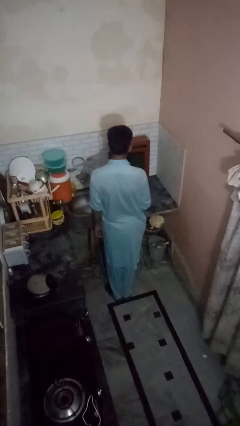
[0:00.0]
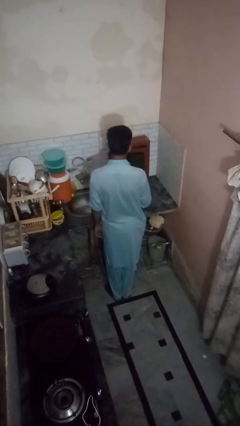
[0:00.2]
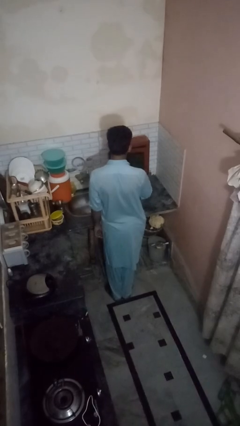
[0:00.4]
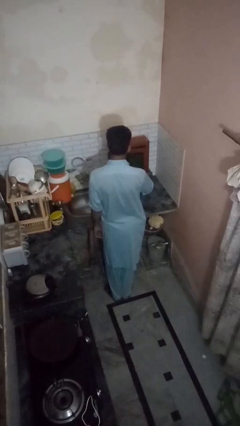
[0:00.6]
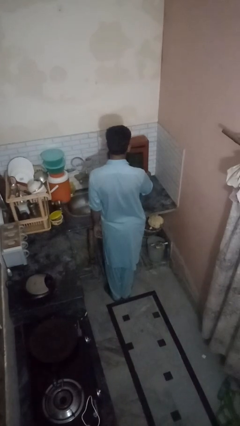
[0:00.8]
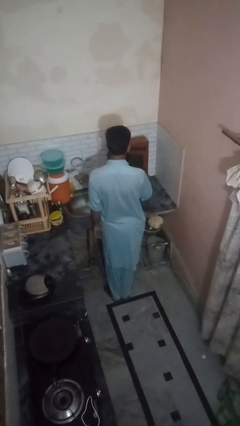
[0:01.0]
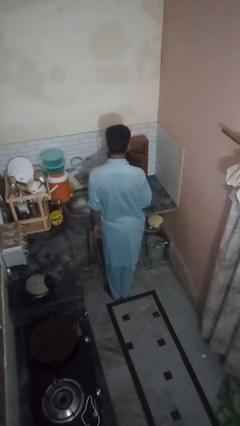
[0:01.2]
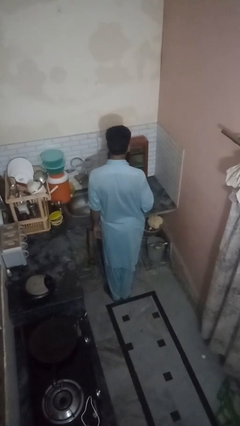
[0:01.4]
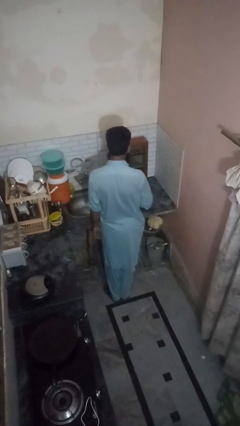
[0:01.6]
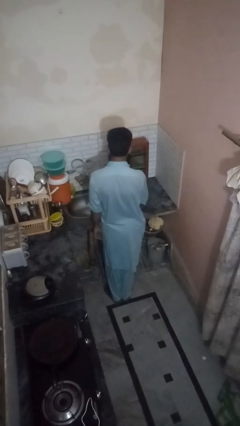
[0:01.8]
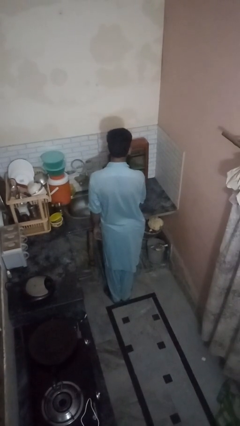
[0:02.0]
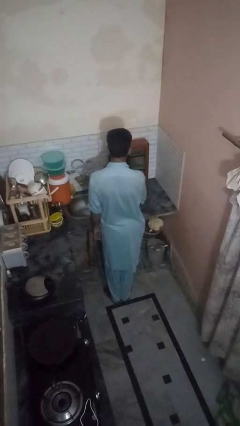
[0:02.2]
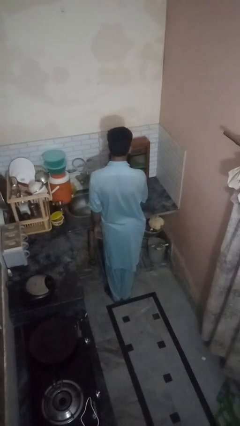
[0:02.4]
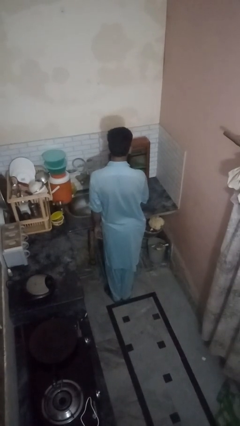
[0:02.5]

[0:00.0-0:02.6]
person opens kitchen drawer

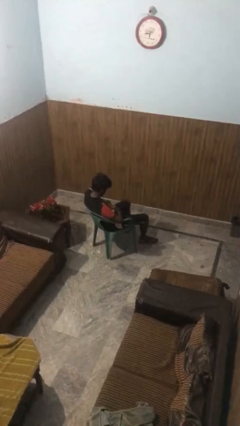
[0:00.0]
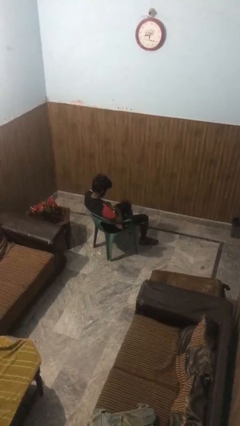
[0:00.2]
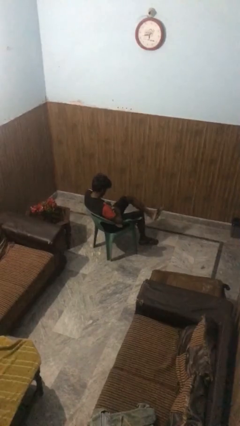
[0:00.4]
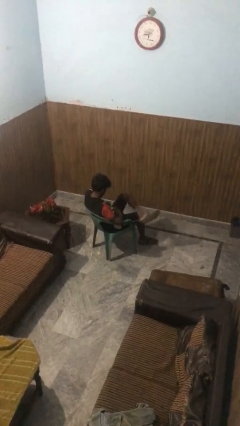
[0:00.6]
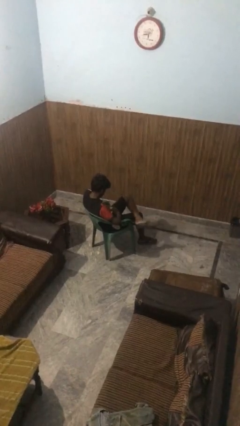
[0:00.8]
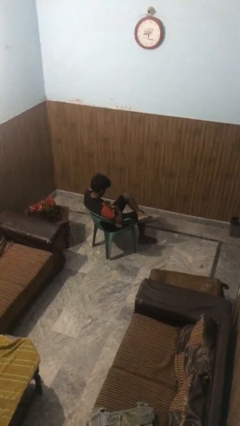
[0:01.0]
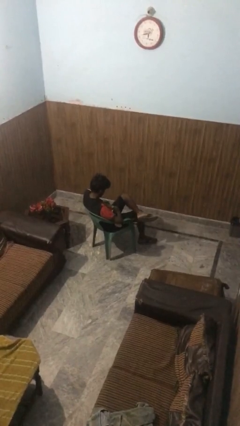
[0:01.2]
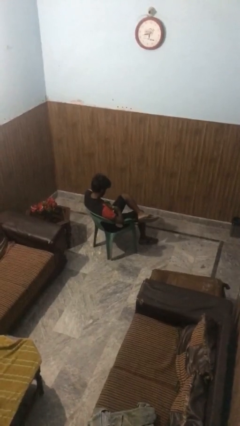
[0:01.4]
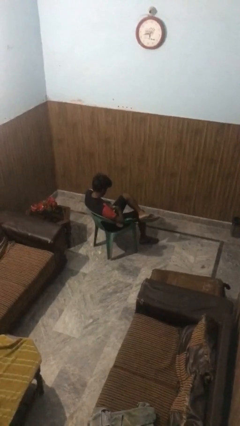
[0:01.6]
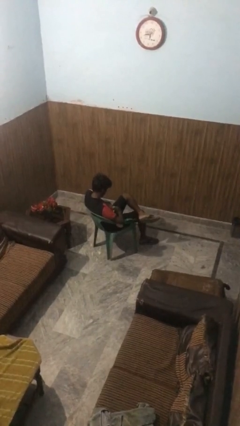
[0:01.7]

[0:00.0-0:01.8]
person crosses legs

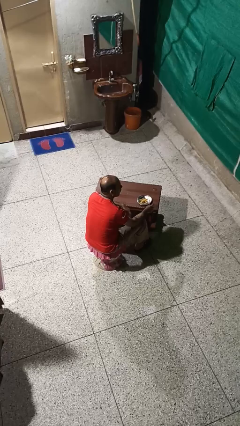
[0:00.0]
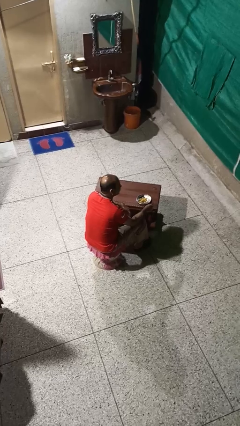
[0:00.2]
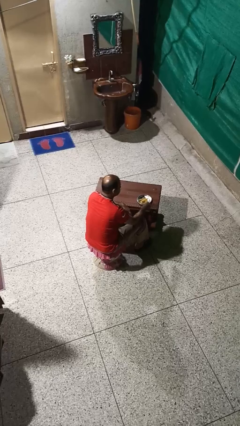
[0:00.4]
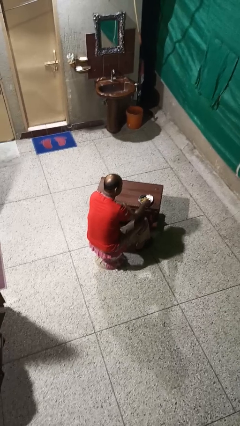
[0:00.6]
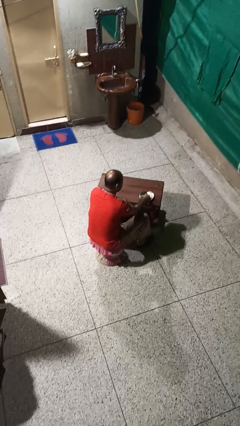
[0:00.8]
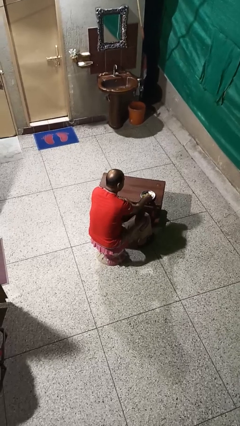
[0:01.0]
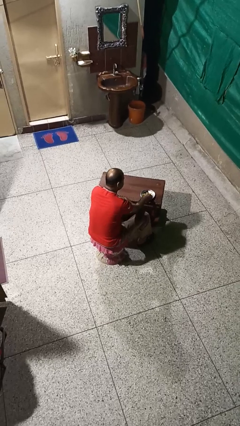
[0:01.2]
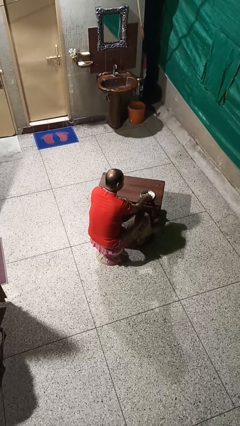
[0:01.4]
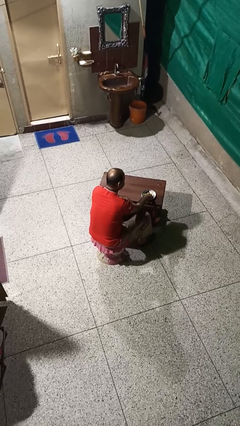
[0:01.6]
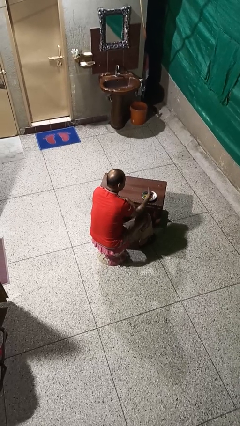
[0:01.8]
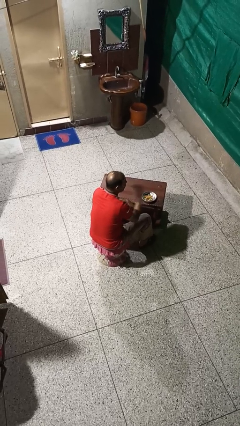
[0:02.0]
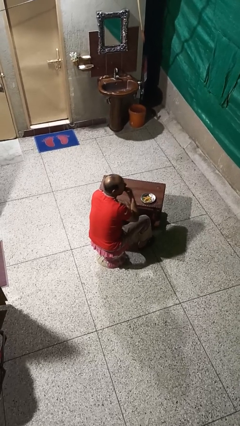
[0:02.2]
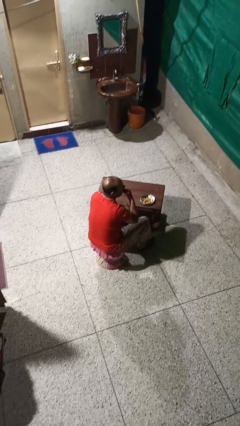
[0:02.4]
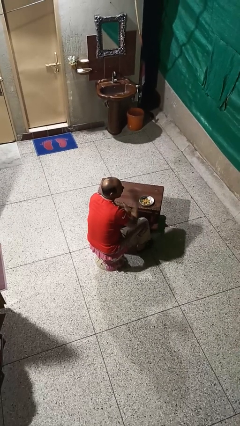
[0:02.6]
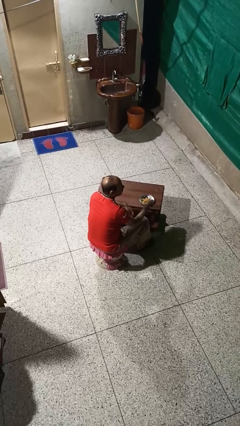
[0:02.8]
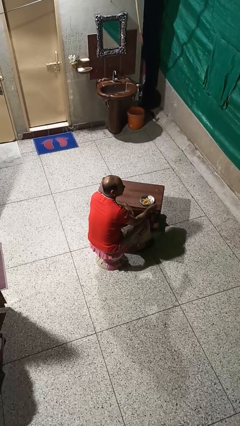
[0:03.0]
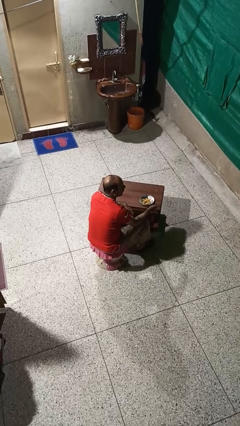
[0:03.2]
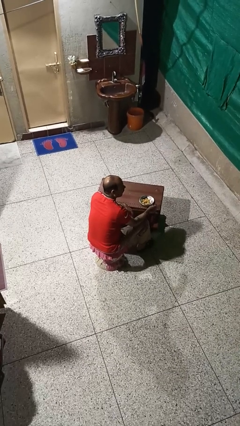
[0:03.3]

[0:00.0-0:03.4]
person eats with hands

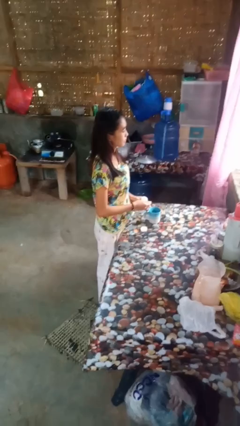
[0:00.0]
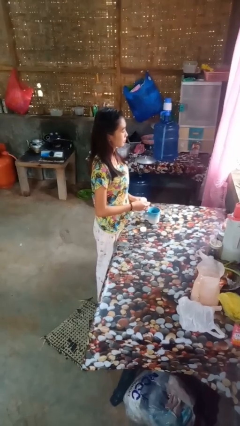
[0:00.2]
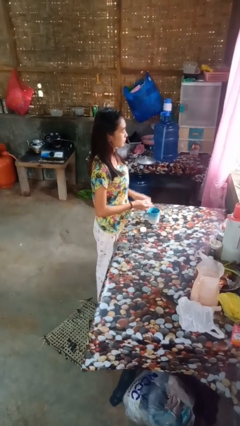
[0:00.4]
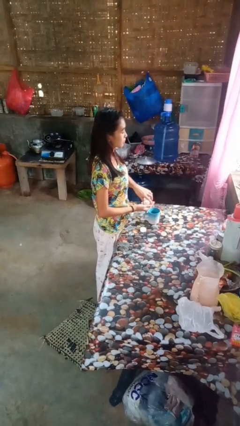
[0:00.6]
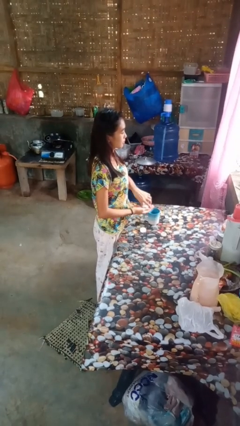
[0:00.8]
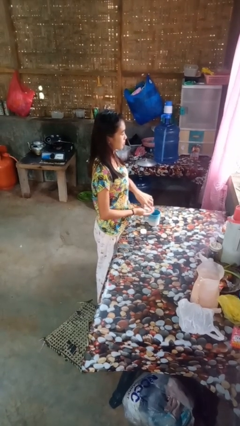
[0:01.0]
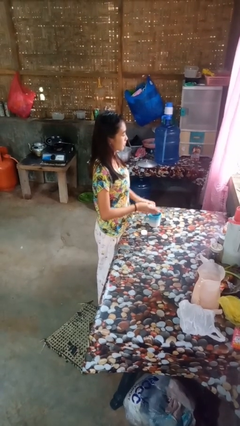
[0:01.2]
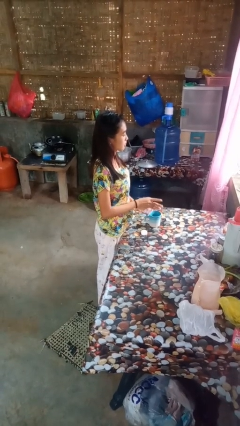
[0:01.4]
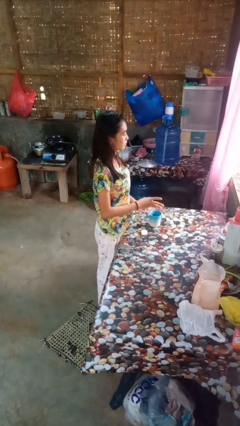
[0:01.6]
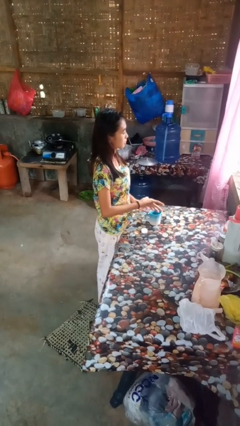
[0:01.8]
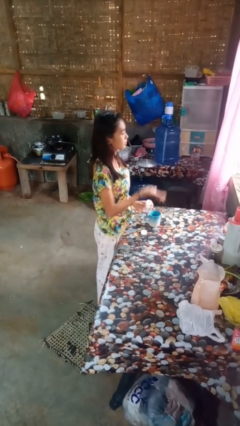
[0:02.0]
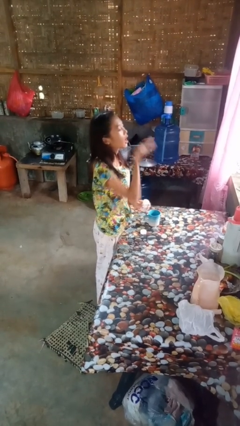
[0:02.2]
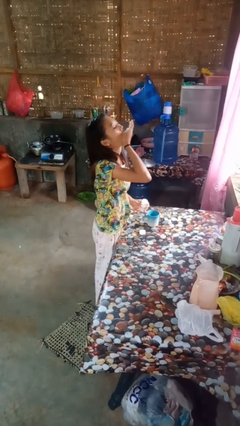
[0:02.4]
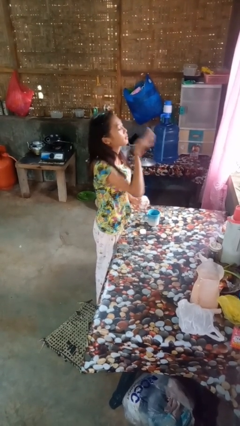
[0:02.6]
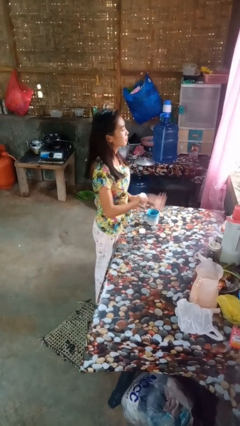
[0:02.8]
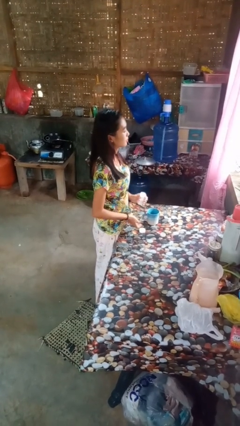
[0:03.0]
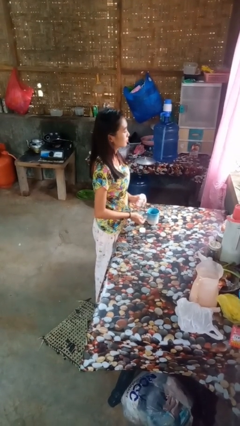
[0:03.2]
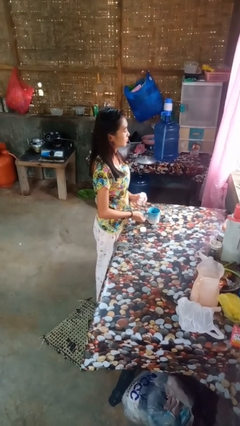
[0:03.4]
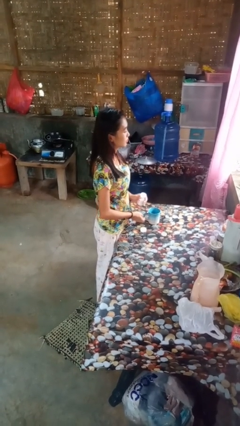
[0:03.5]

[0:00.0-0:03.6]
person takes medicine pills

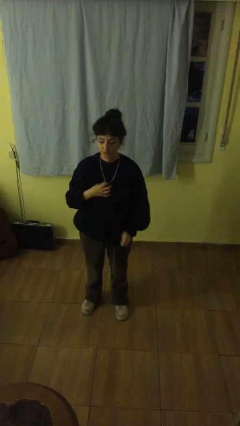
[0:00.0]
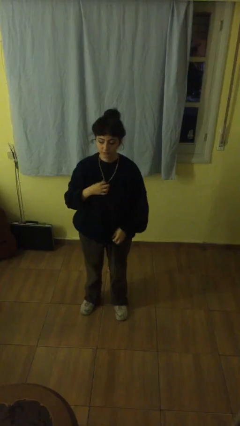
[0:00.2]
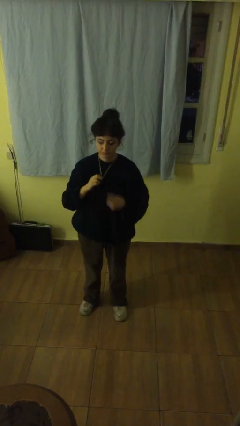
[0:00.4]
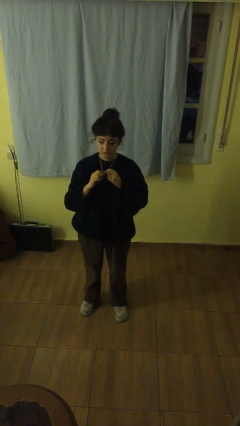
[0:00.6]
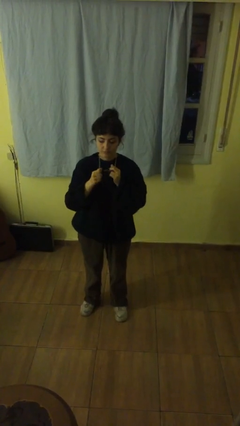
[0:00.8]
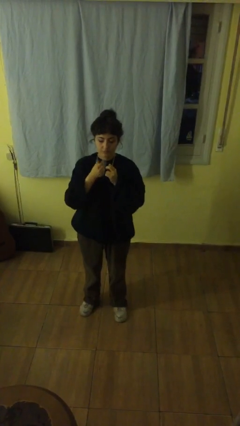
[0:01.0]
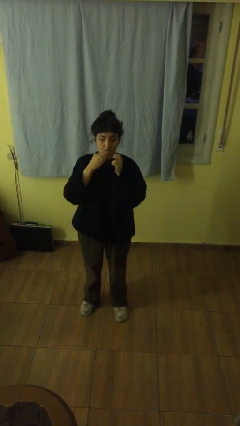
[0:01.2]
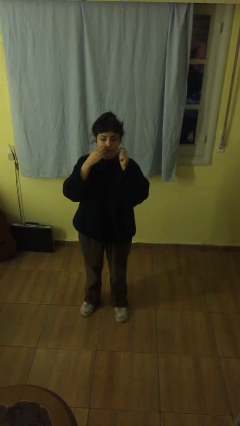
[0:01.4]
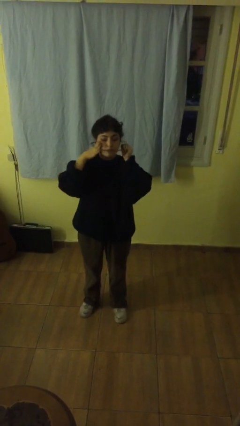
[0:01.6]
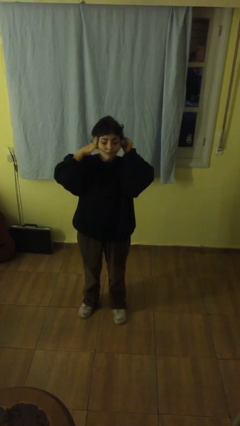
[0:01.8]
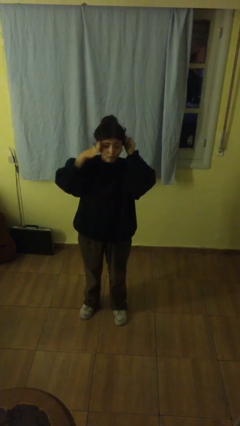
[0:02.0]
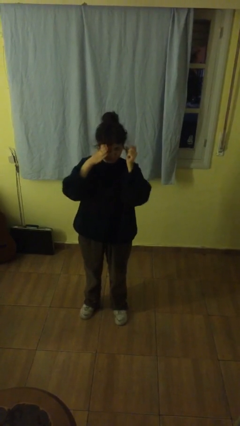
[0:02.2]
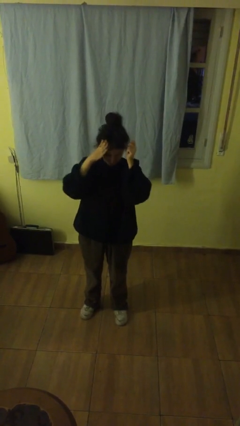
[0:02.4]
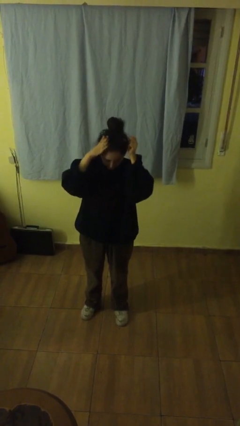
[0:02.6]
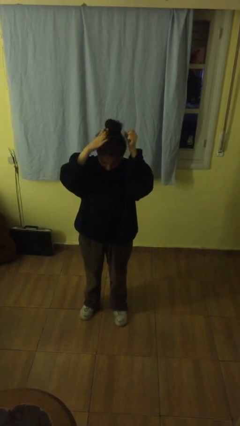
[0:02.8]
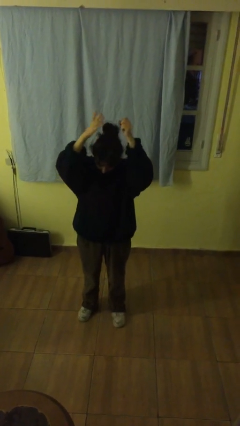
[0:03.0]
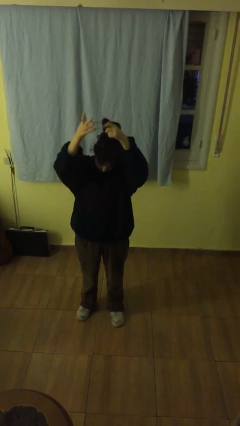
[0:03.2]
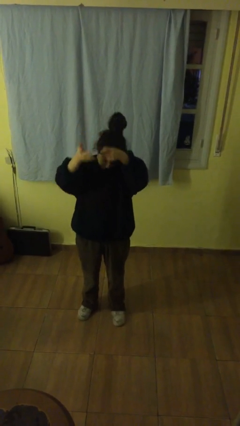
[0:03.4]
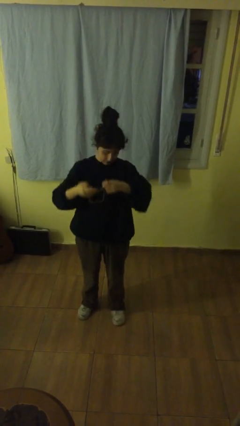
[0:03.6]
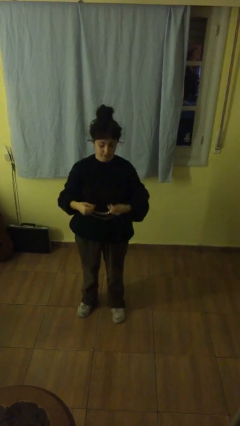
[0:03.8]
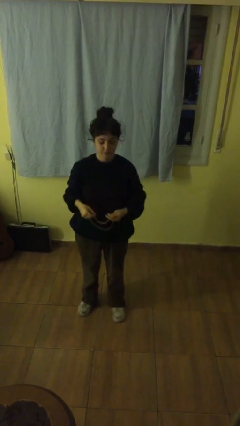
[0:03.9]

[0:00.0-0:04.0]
person takes off necklace

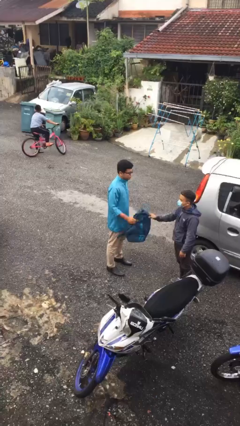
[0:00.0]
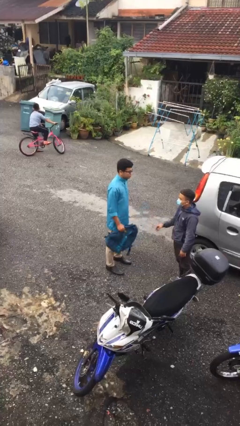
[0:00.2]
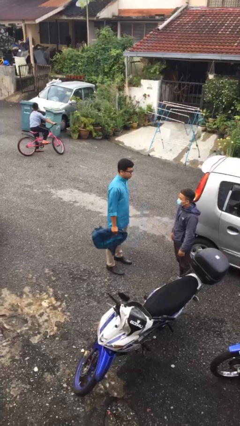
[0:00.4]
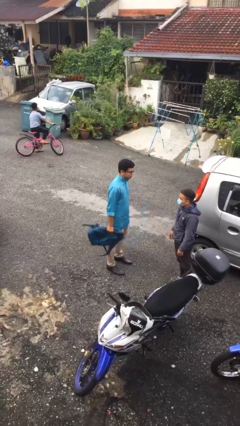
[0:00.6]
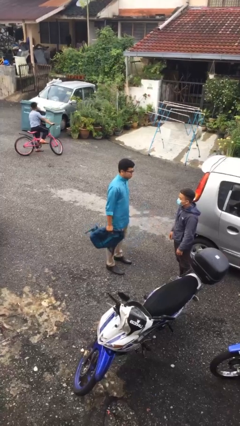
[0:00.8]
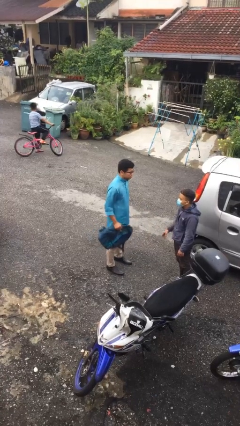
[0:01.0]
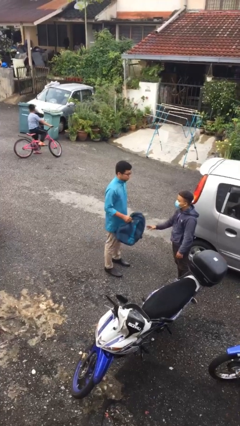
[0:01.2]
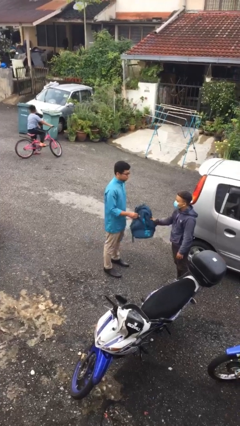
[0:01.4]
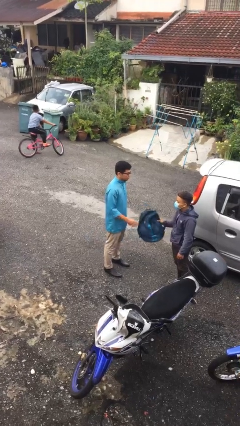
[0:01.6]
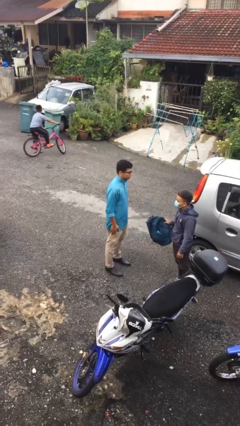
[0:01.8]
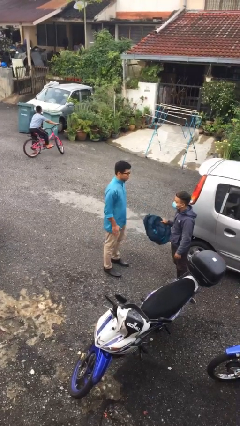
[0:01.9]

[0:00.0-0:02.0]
person transfers object to person
